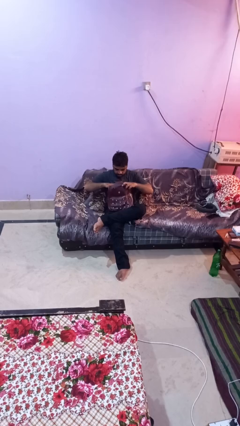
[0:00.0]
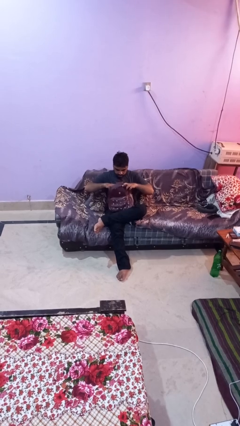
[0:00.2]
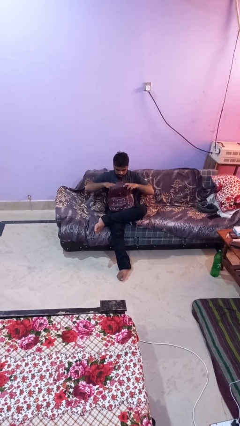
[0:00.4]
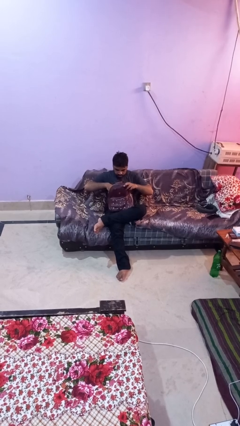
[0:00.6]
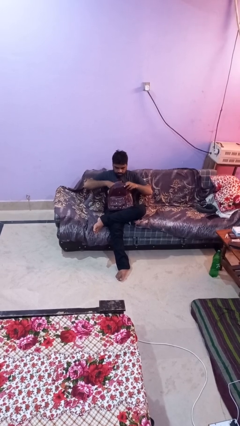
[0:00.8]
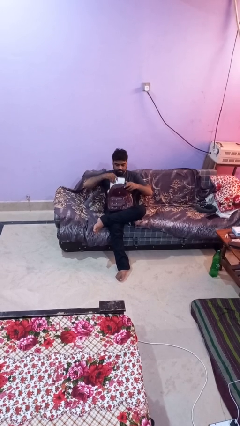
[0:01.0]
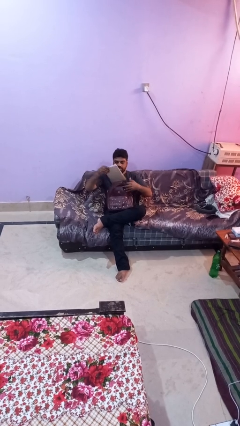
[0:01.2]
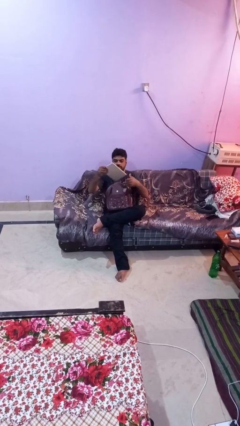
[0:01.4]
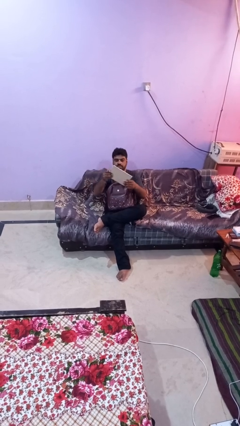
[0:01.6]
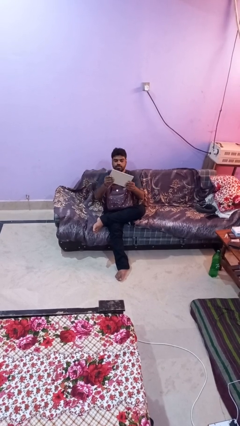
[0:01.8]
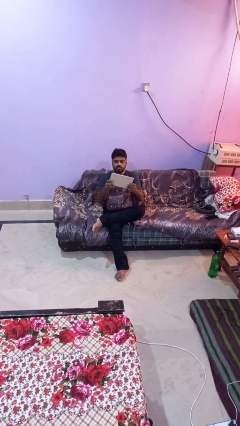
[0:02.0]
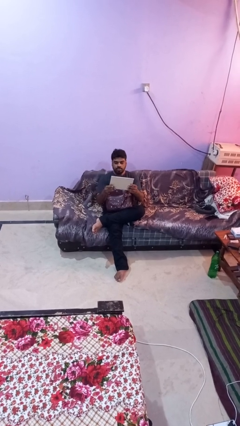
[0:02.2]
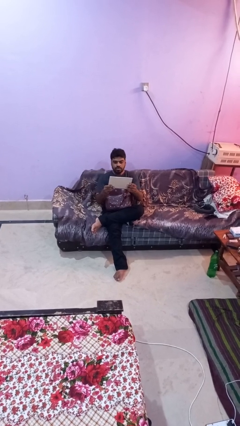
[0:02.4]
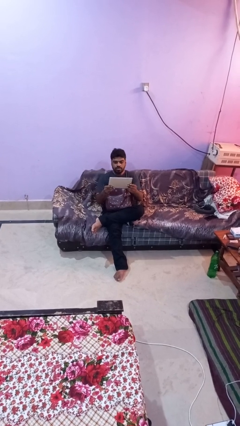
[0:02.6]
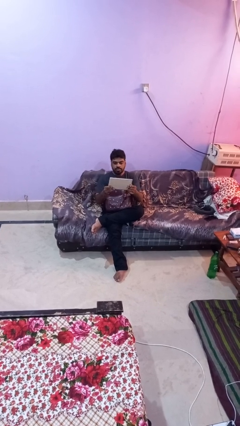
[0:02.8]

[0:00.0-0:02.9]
person takes object from backpack

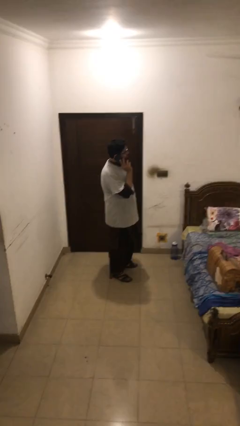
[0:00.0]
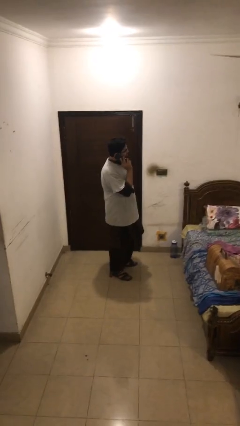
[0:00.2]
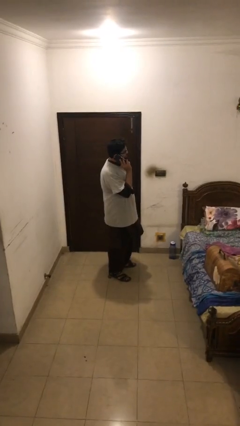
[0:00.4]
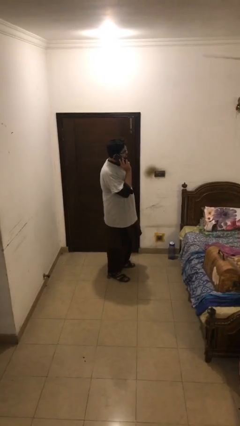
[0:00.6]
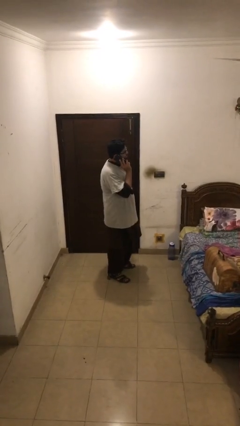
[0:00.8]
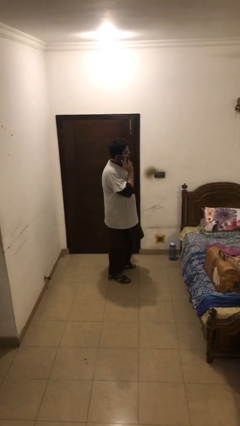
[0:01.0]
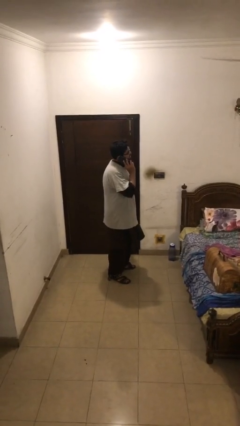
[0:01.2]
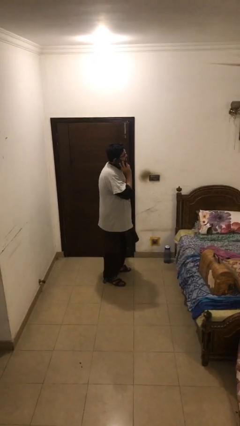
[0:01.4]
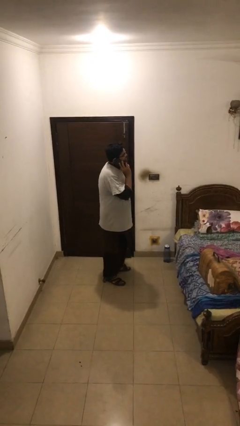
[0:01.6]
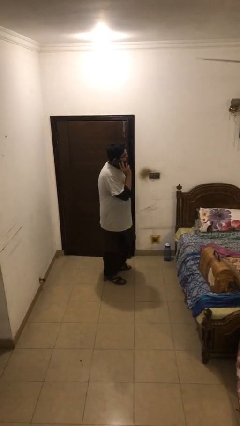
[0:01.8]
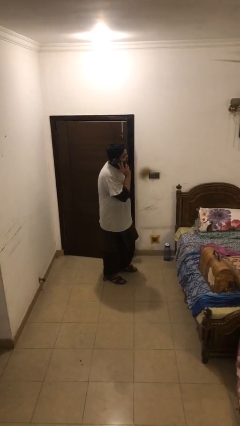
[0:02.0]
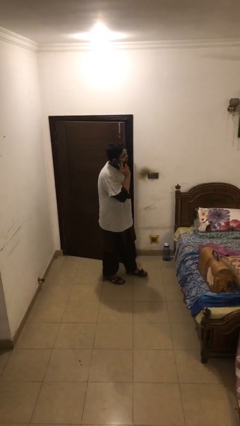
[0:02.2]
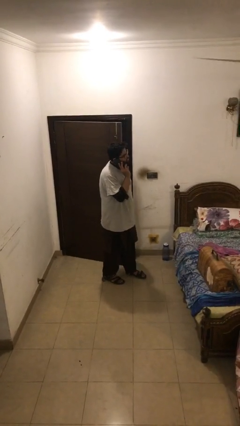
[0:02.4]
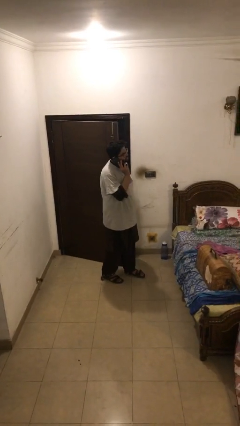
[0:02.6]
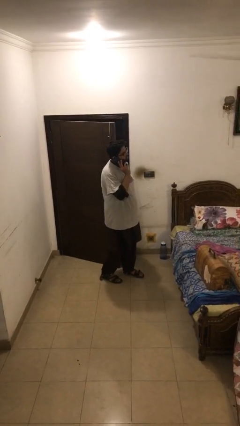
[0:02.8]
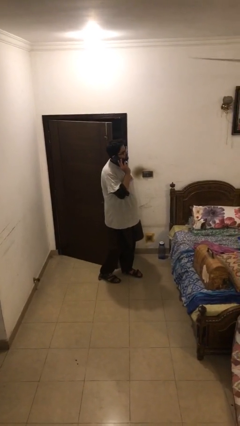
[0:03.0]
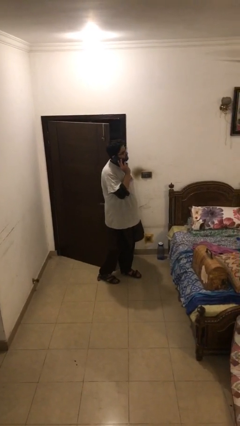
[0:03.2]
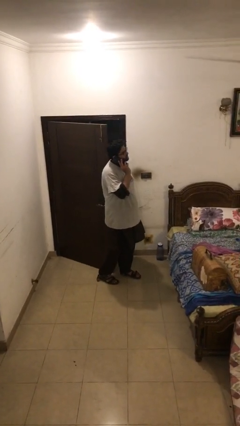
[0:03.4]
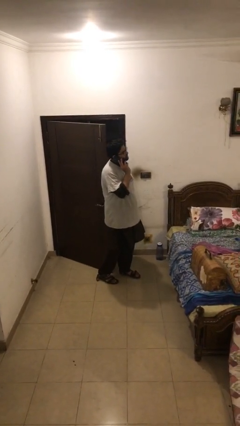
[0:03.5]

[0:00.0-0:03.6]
person opens facility door

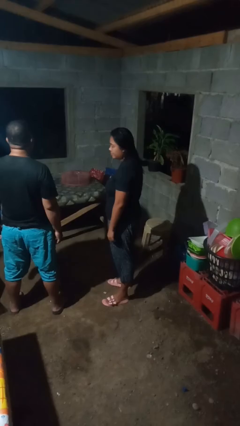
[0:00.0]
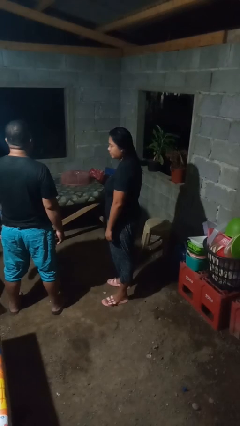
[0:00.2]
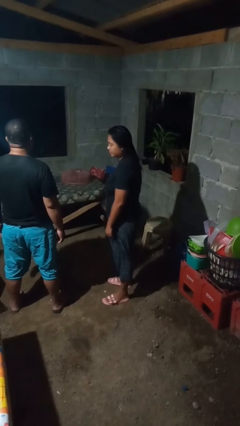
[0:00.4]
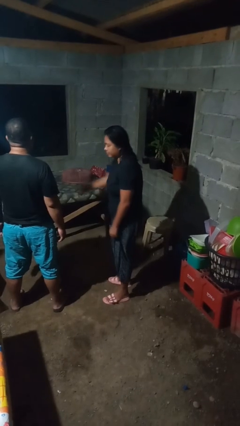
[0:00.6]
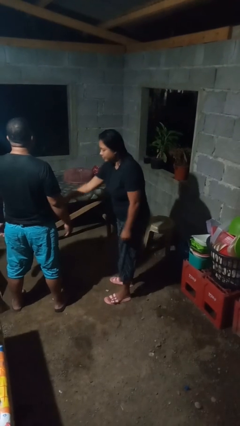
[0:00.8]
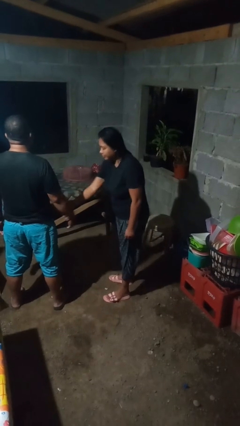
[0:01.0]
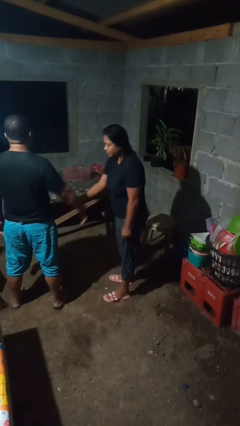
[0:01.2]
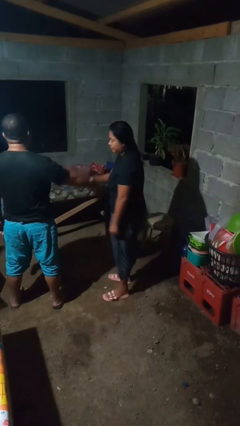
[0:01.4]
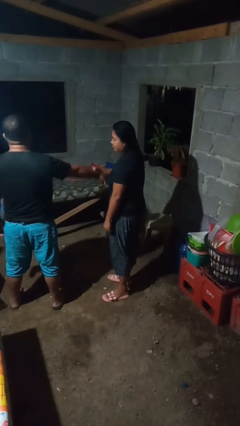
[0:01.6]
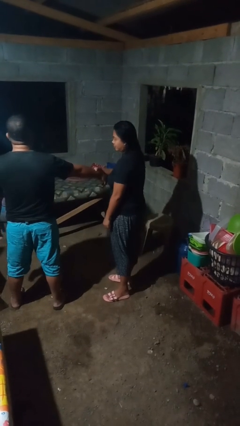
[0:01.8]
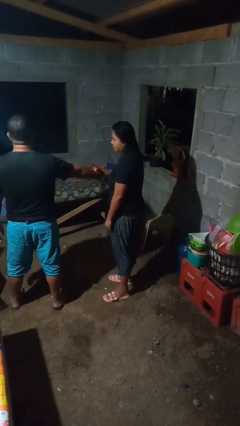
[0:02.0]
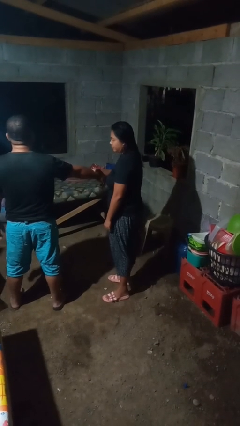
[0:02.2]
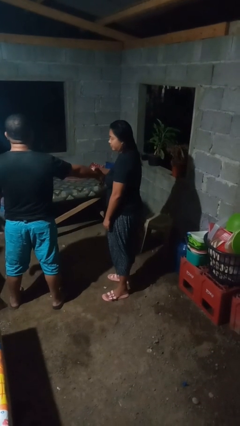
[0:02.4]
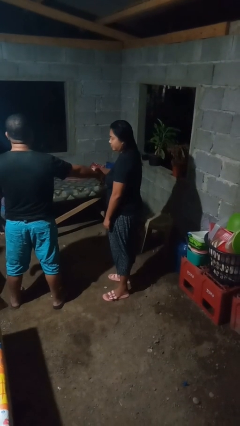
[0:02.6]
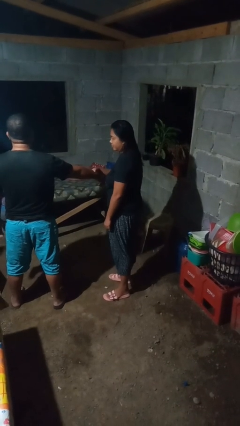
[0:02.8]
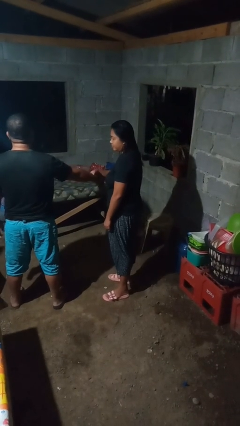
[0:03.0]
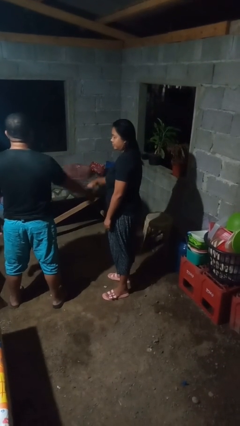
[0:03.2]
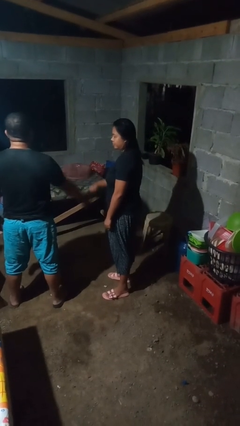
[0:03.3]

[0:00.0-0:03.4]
person grabs person by forearm

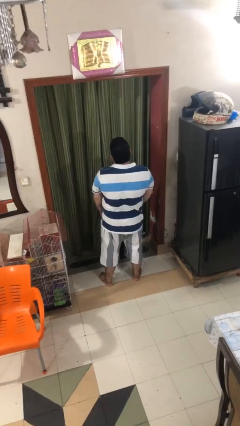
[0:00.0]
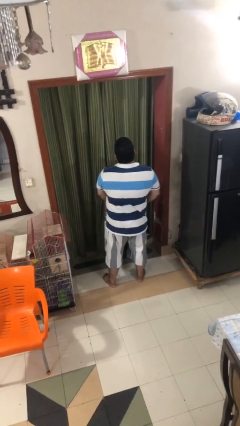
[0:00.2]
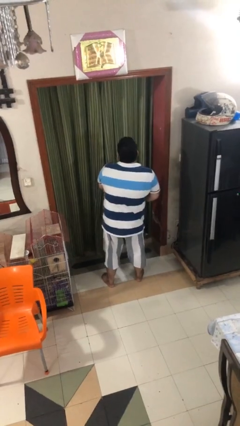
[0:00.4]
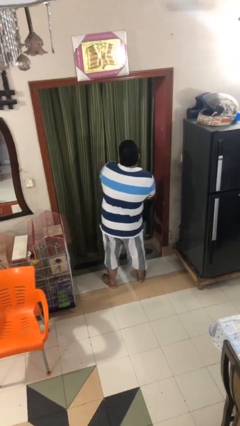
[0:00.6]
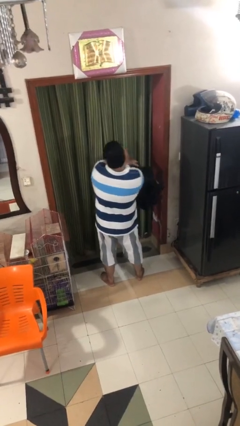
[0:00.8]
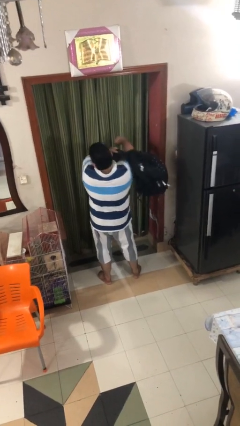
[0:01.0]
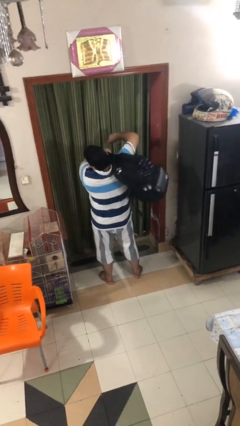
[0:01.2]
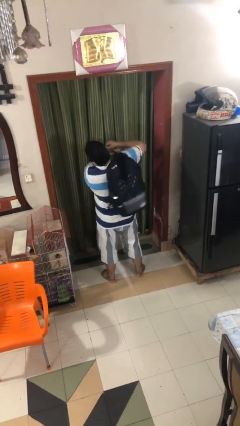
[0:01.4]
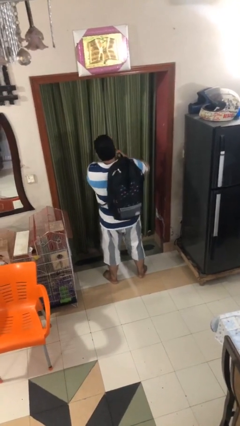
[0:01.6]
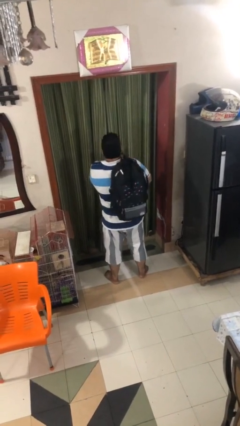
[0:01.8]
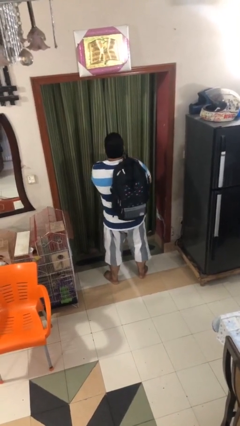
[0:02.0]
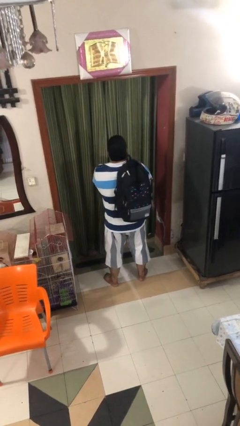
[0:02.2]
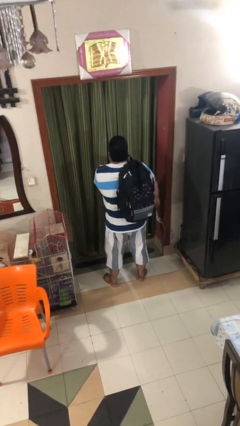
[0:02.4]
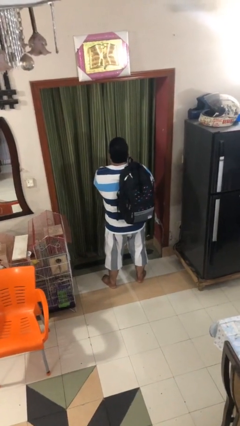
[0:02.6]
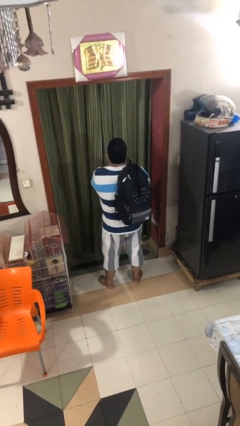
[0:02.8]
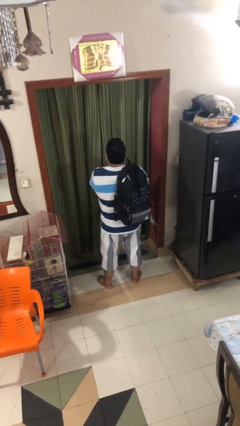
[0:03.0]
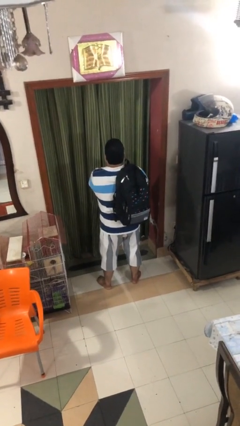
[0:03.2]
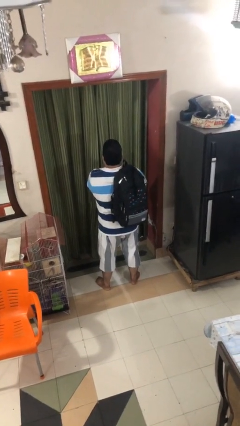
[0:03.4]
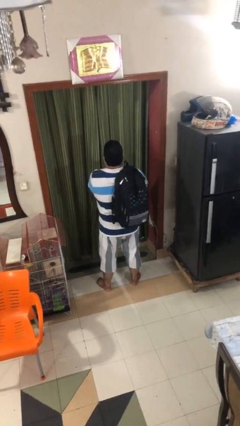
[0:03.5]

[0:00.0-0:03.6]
person puts on backpack

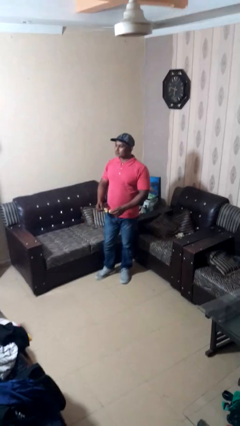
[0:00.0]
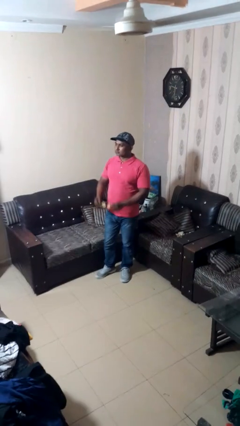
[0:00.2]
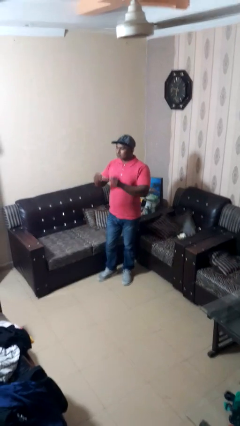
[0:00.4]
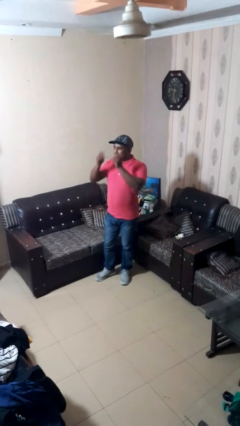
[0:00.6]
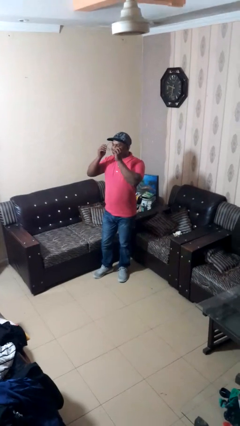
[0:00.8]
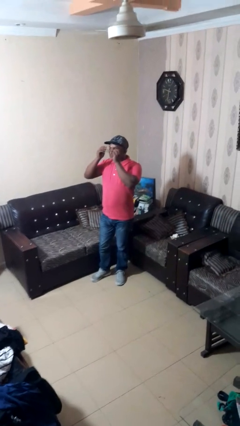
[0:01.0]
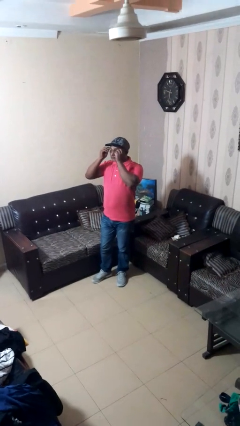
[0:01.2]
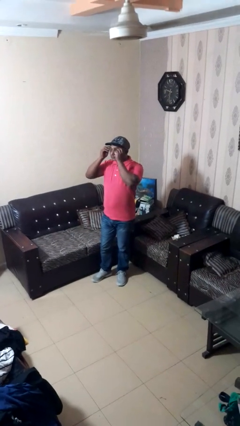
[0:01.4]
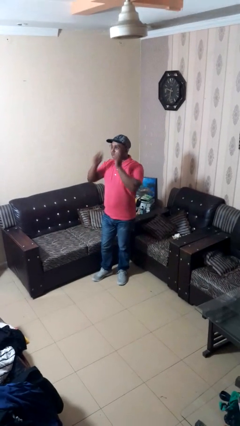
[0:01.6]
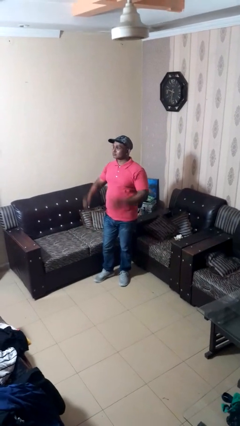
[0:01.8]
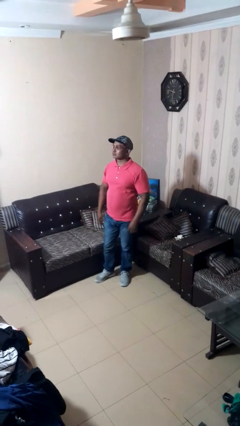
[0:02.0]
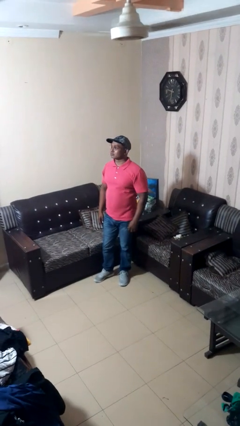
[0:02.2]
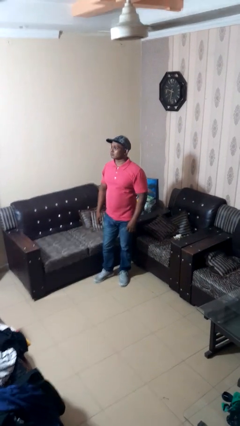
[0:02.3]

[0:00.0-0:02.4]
person puts on glasses

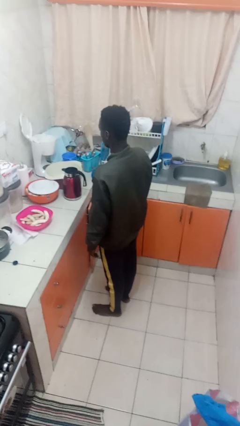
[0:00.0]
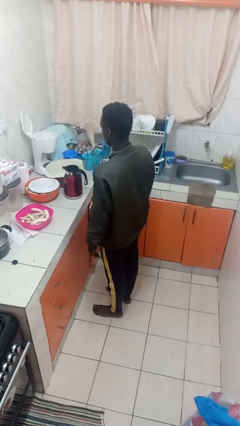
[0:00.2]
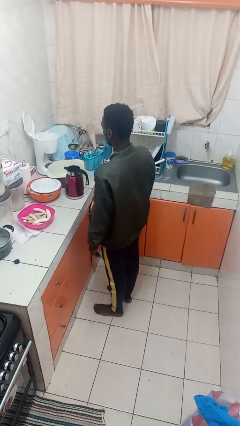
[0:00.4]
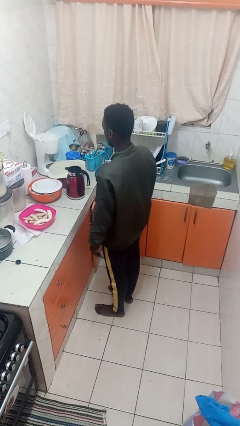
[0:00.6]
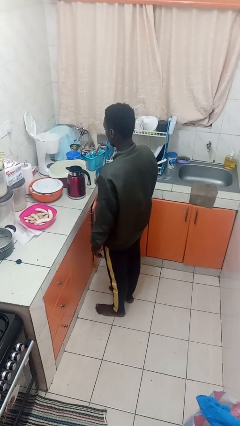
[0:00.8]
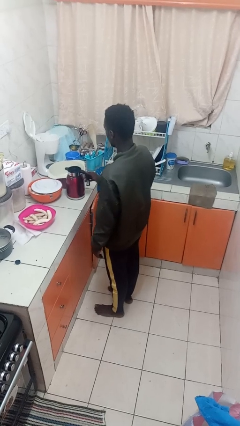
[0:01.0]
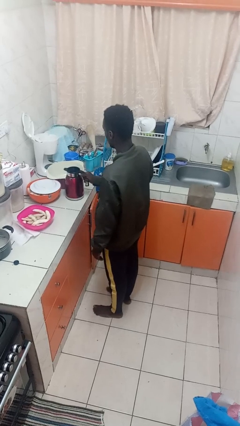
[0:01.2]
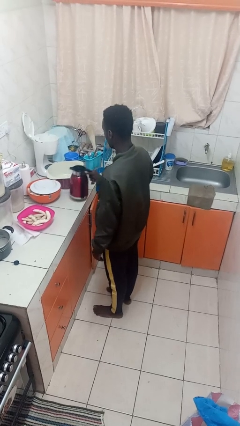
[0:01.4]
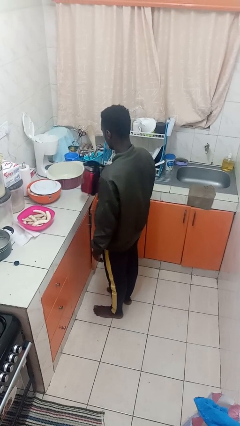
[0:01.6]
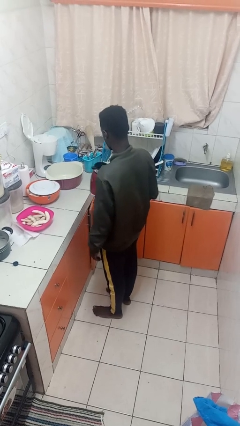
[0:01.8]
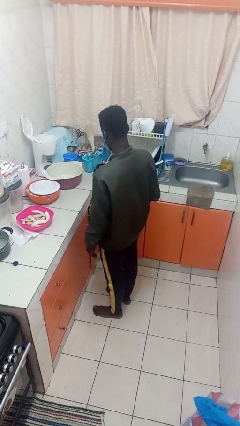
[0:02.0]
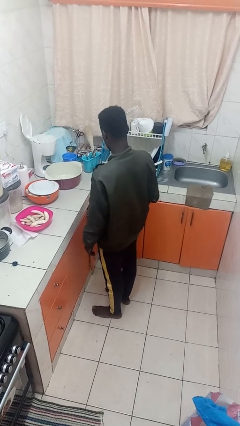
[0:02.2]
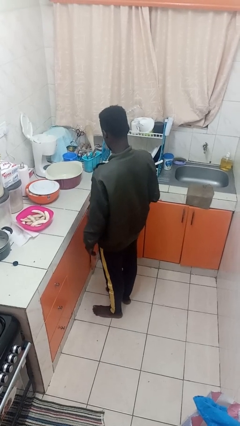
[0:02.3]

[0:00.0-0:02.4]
person picks up object from countertop
